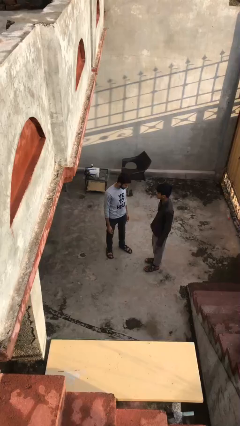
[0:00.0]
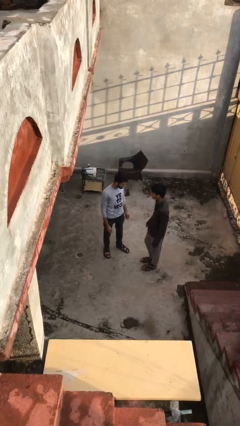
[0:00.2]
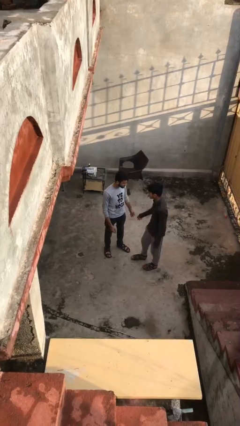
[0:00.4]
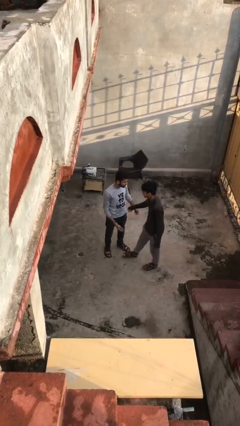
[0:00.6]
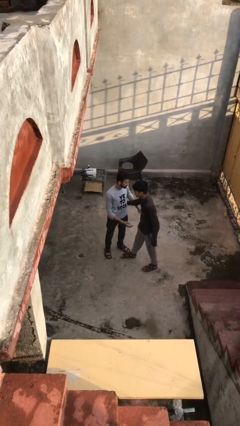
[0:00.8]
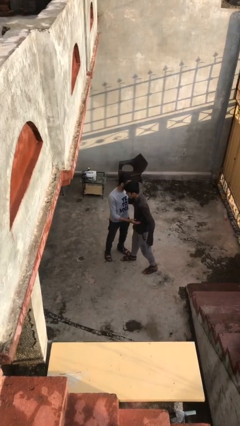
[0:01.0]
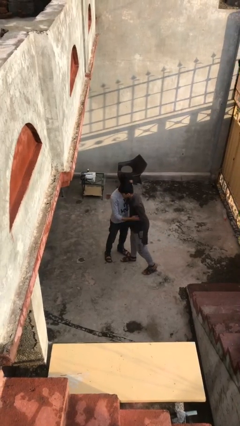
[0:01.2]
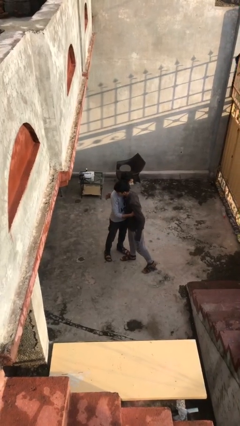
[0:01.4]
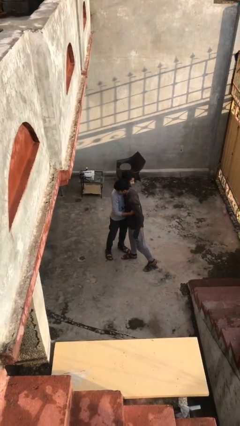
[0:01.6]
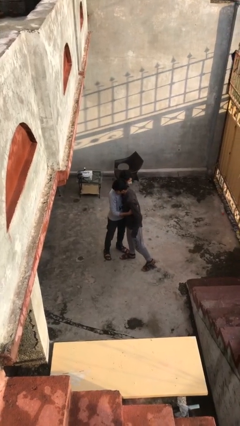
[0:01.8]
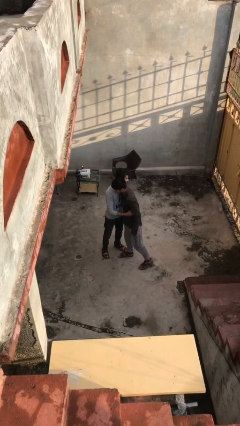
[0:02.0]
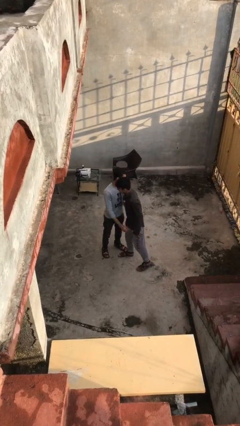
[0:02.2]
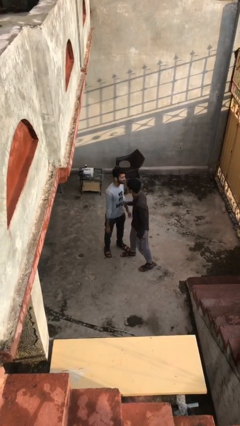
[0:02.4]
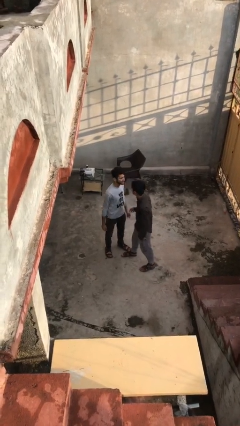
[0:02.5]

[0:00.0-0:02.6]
person embraces person

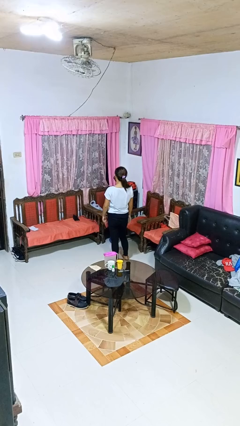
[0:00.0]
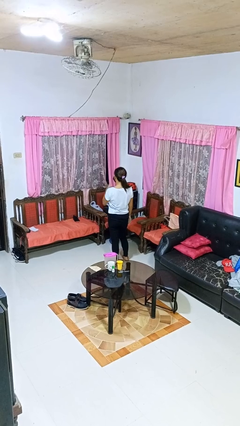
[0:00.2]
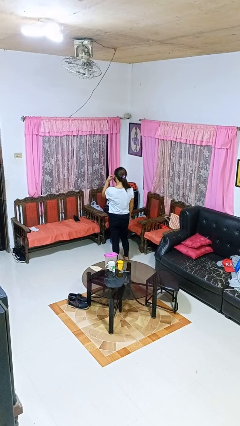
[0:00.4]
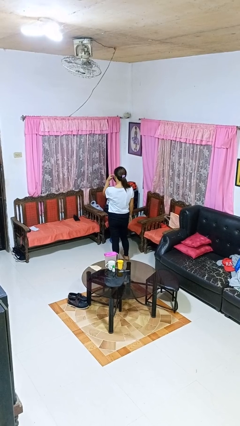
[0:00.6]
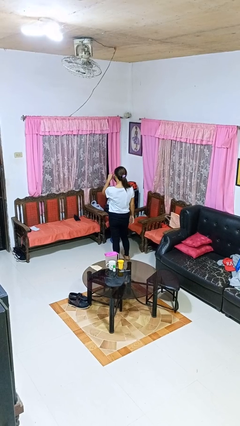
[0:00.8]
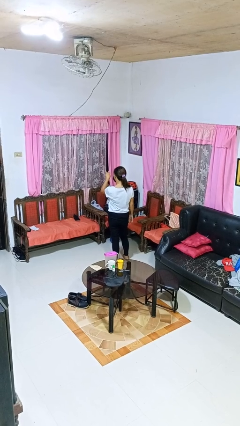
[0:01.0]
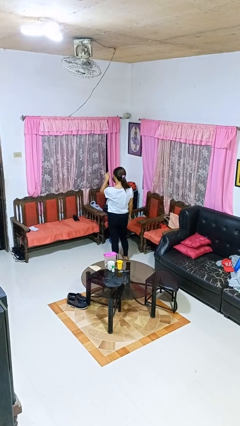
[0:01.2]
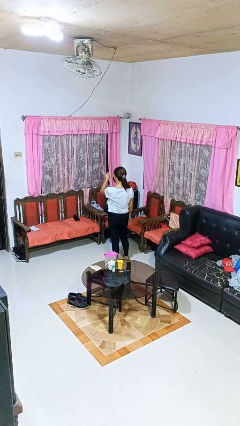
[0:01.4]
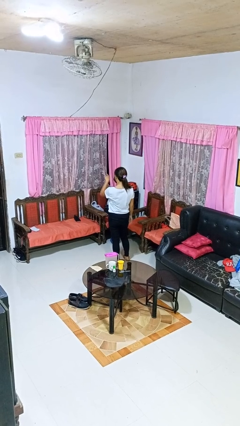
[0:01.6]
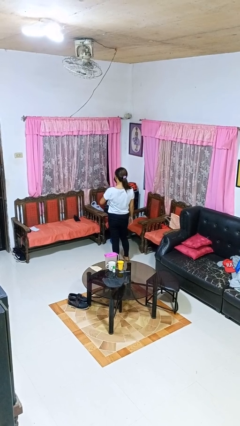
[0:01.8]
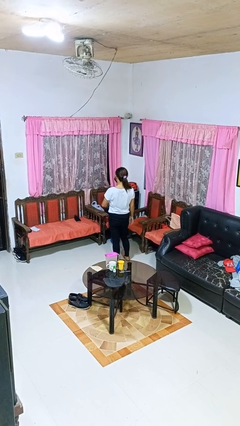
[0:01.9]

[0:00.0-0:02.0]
person gestures watch closely

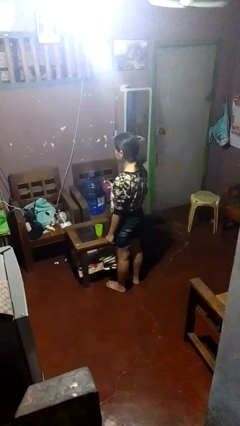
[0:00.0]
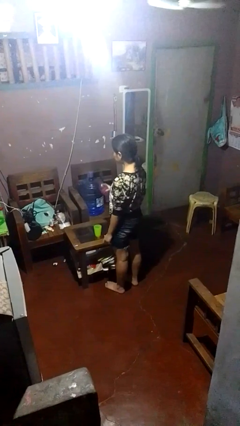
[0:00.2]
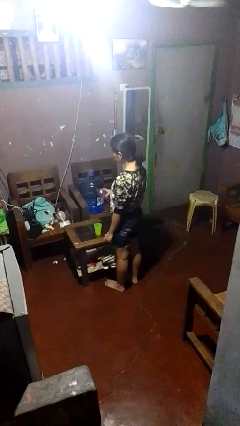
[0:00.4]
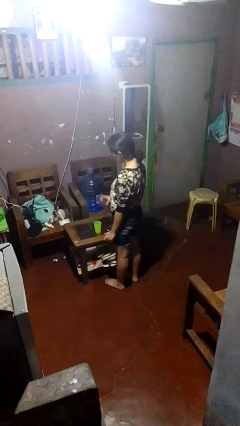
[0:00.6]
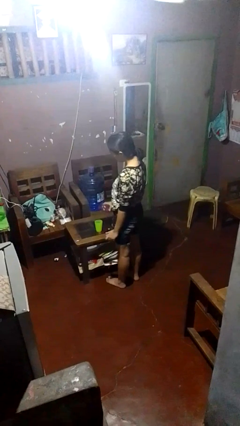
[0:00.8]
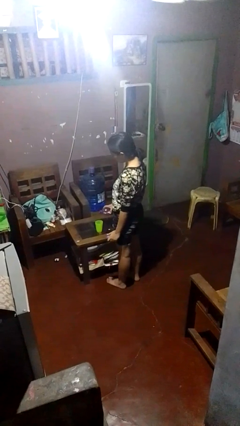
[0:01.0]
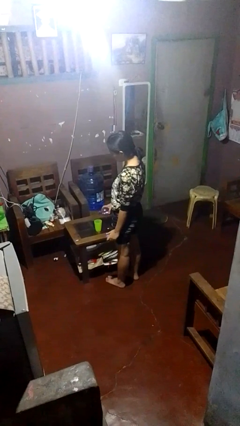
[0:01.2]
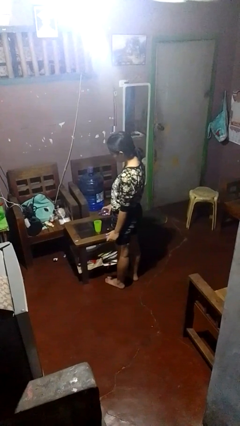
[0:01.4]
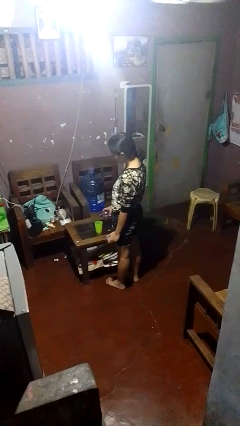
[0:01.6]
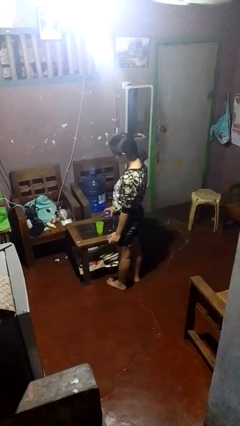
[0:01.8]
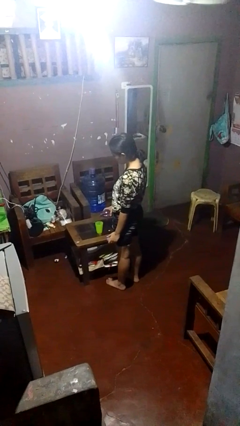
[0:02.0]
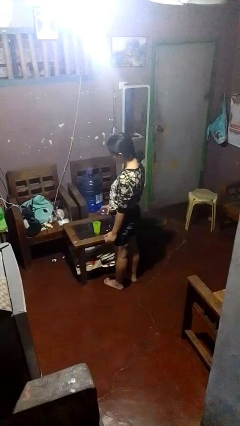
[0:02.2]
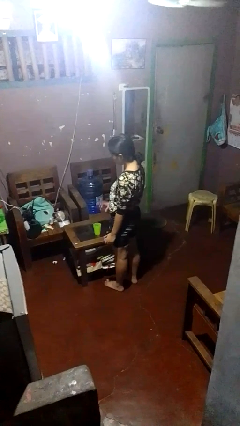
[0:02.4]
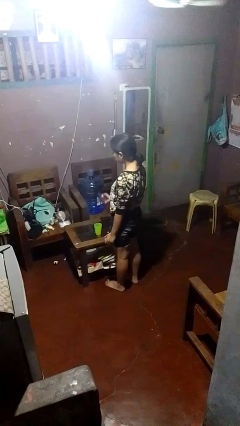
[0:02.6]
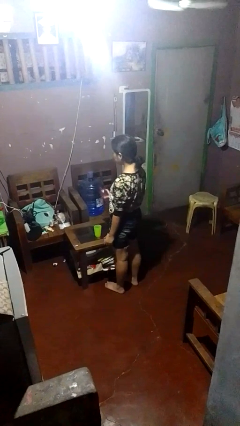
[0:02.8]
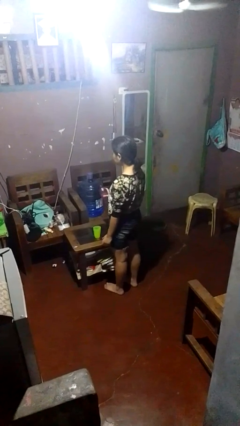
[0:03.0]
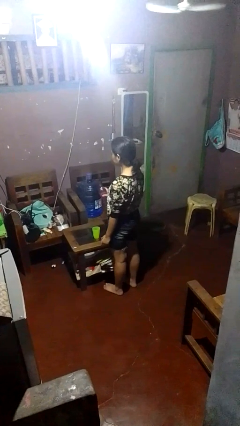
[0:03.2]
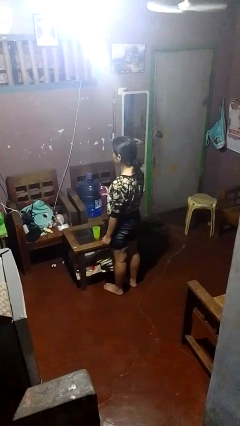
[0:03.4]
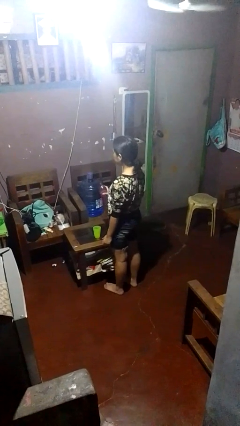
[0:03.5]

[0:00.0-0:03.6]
person pours liquid into cup

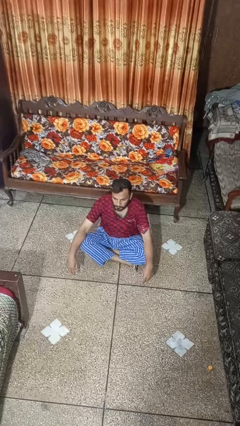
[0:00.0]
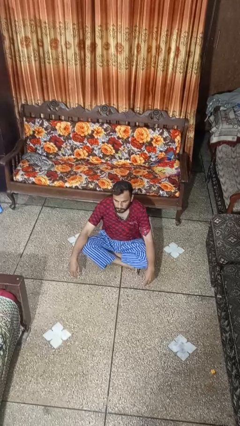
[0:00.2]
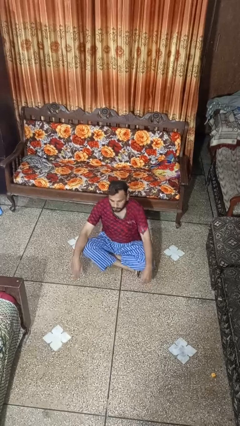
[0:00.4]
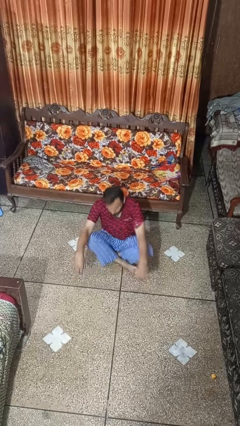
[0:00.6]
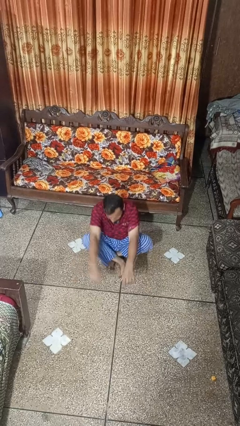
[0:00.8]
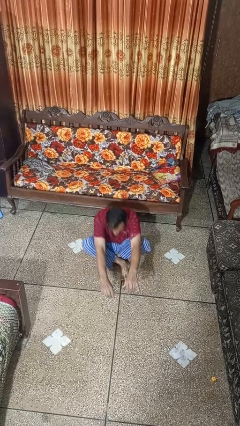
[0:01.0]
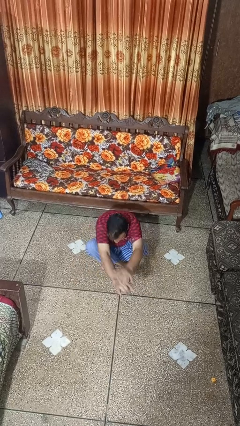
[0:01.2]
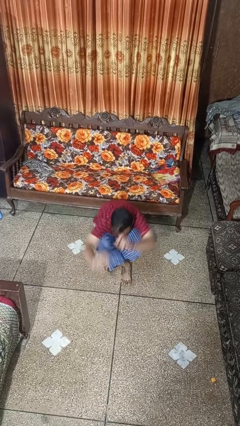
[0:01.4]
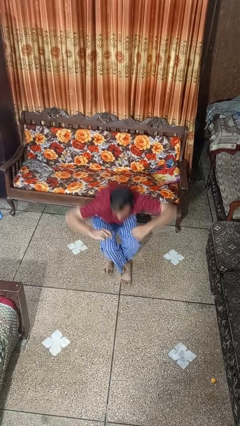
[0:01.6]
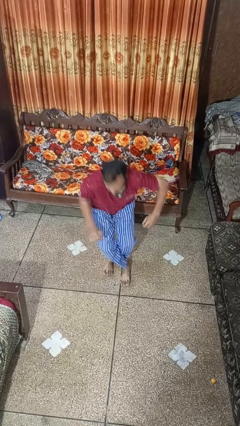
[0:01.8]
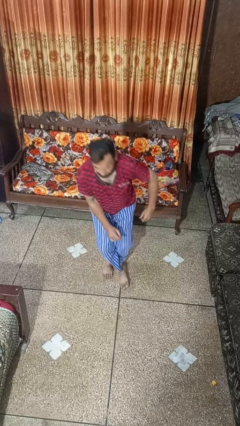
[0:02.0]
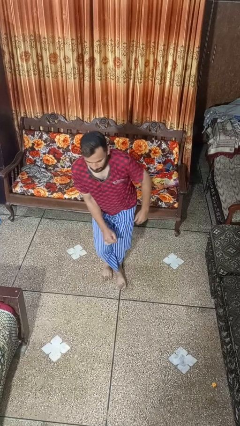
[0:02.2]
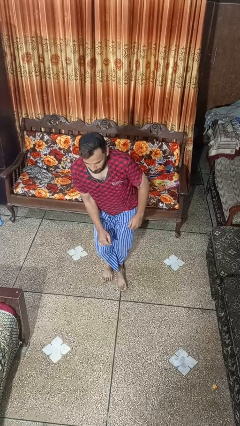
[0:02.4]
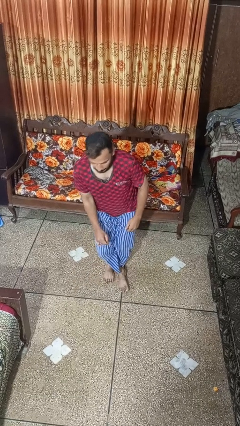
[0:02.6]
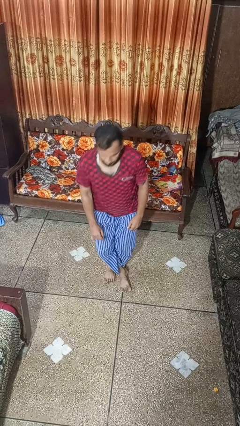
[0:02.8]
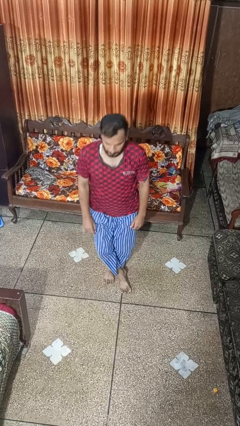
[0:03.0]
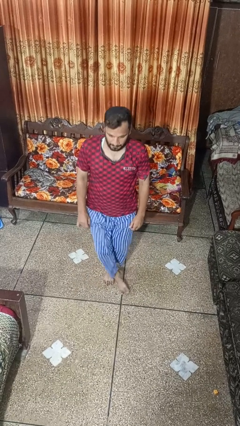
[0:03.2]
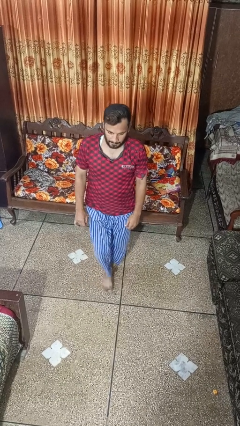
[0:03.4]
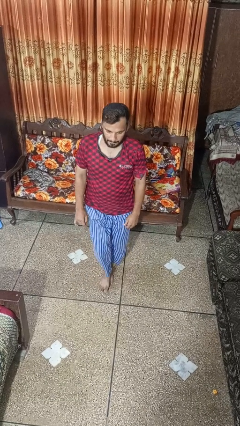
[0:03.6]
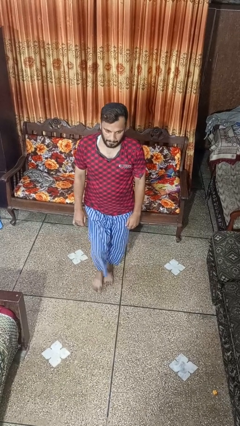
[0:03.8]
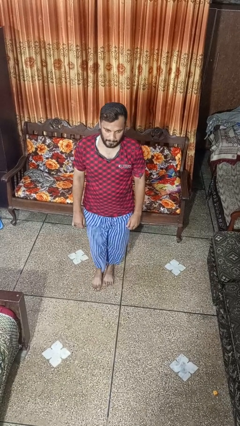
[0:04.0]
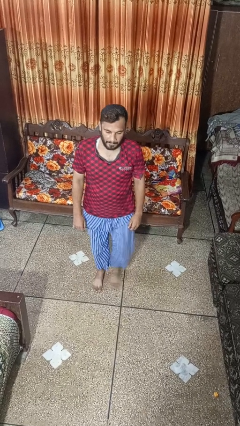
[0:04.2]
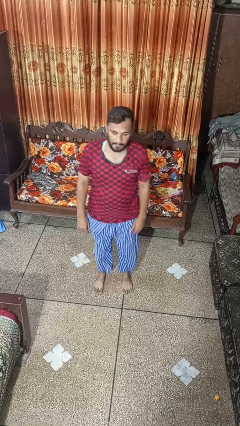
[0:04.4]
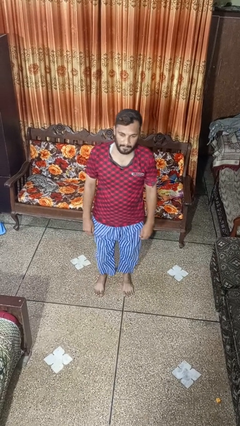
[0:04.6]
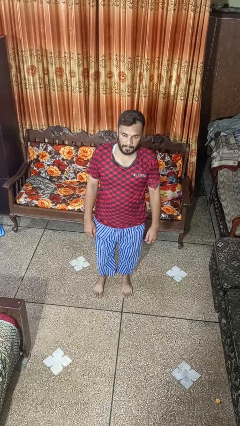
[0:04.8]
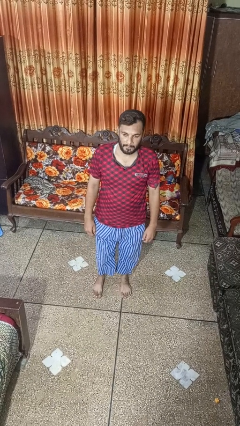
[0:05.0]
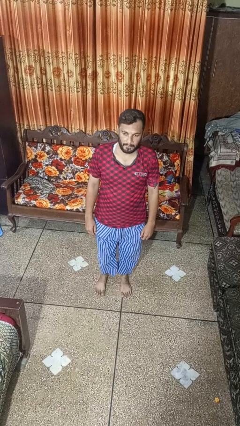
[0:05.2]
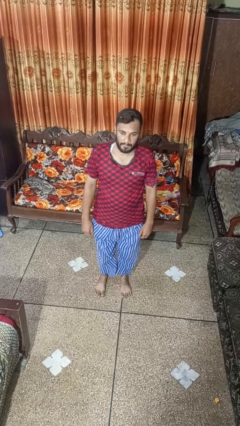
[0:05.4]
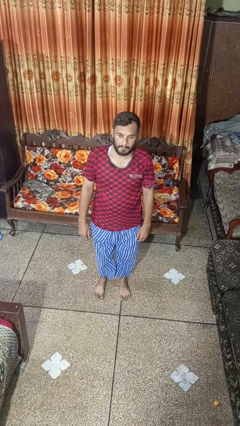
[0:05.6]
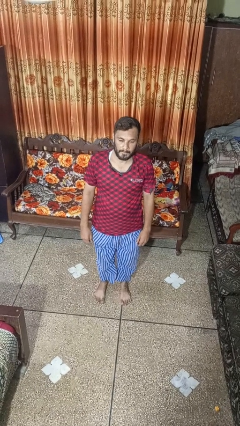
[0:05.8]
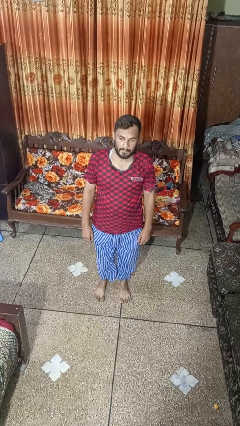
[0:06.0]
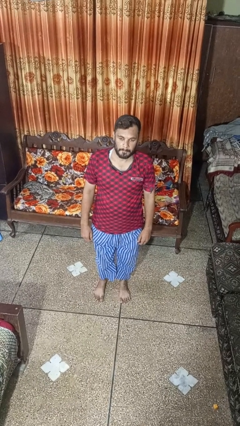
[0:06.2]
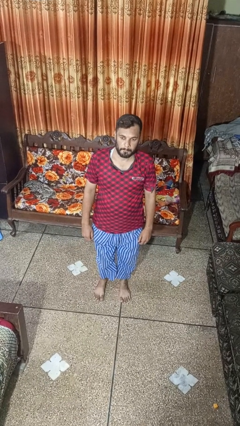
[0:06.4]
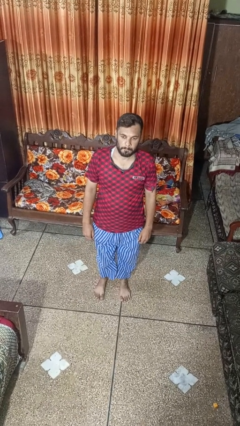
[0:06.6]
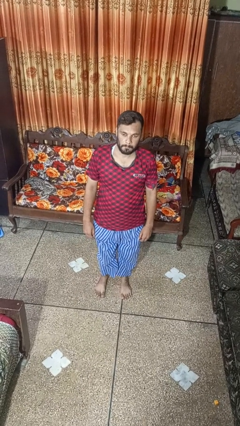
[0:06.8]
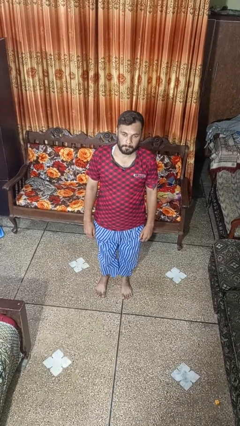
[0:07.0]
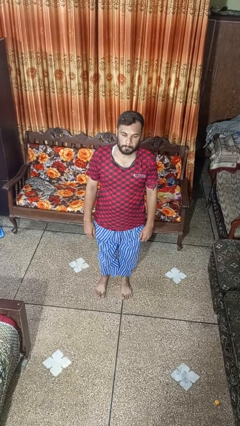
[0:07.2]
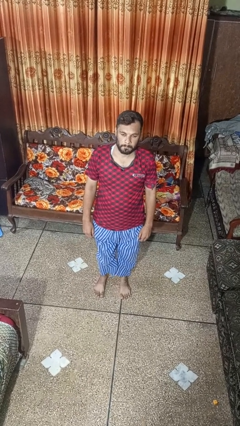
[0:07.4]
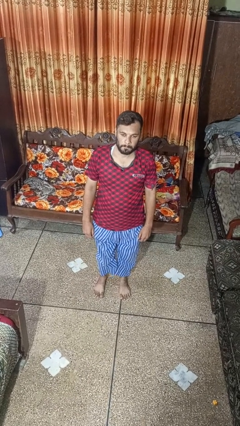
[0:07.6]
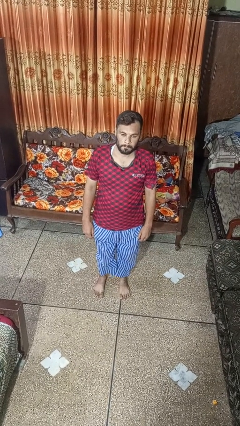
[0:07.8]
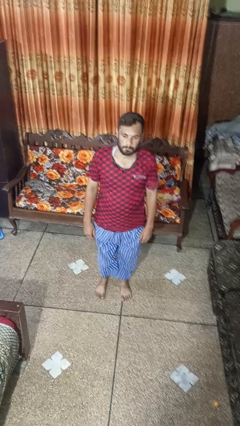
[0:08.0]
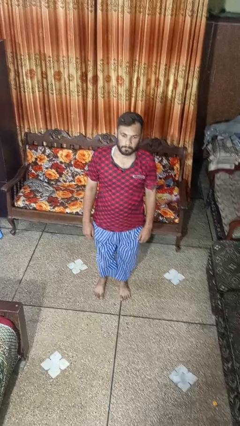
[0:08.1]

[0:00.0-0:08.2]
person stands up from floor

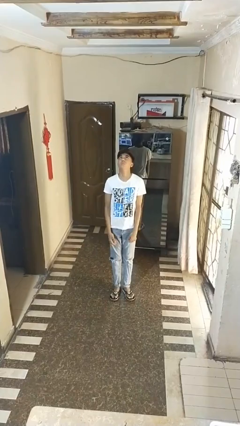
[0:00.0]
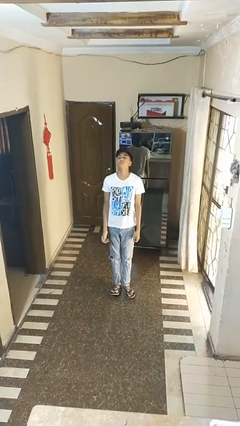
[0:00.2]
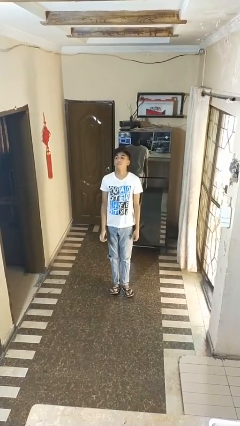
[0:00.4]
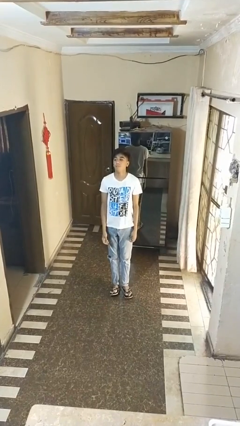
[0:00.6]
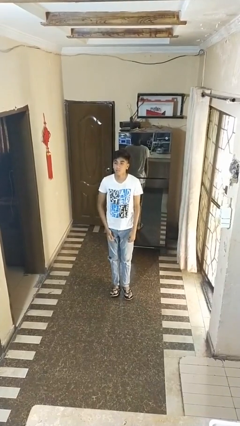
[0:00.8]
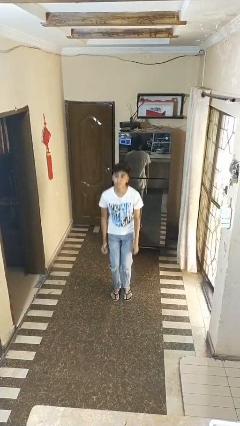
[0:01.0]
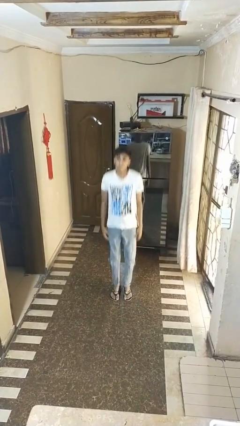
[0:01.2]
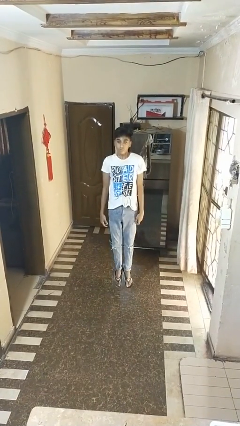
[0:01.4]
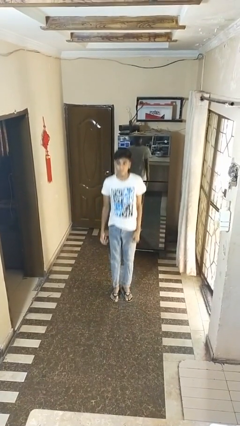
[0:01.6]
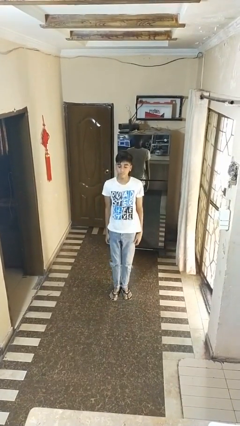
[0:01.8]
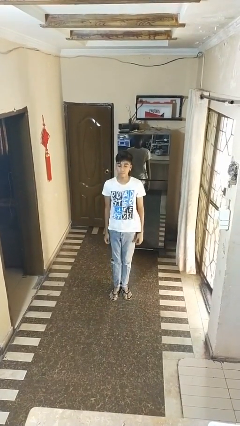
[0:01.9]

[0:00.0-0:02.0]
person jumps
